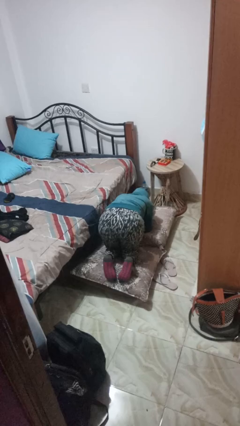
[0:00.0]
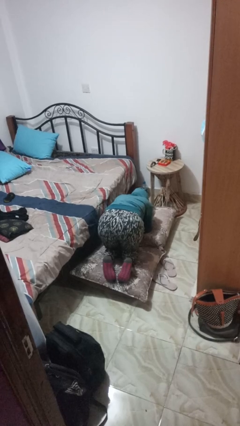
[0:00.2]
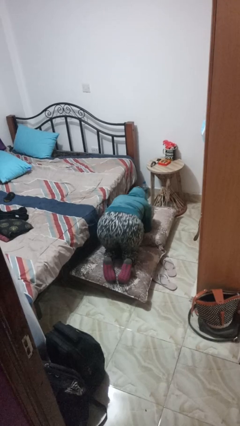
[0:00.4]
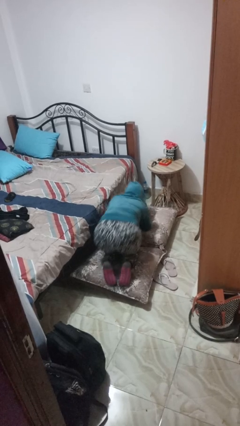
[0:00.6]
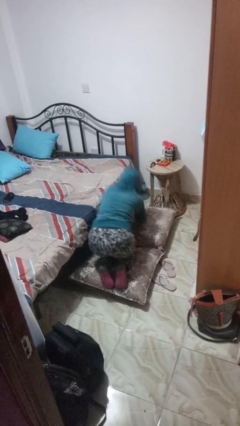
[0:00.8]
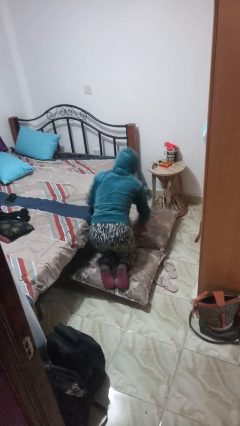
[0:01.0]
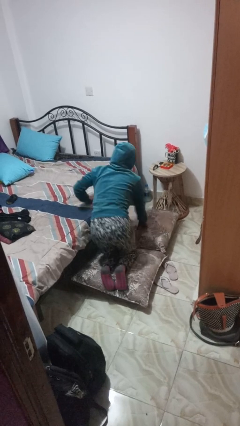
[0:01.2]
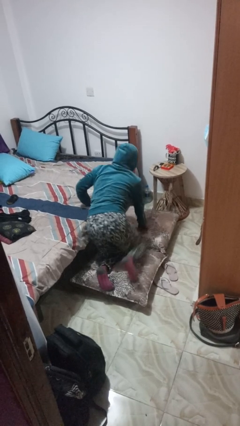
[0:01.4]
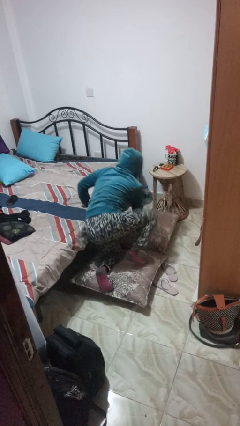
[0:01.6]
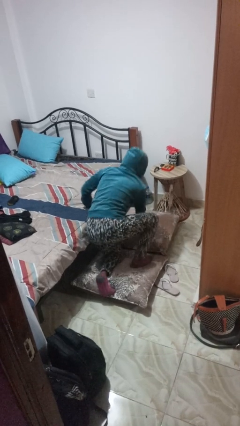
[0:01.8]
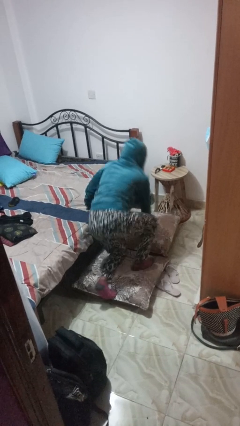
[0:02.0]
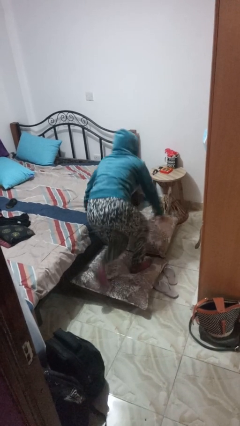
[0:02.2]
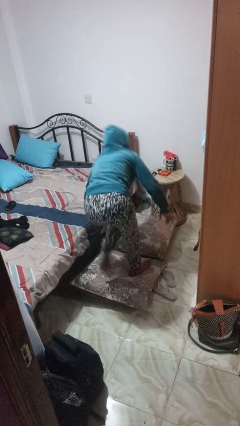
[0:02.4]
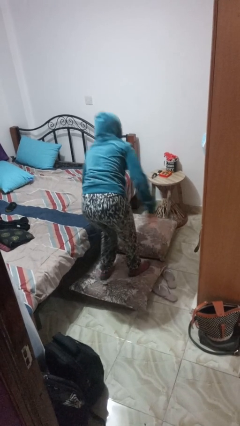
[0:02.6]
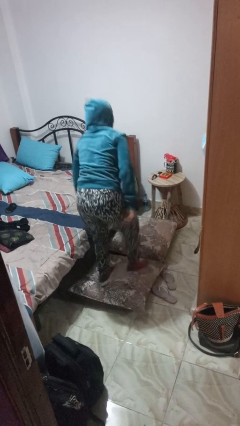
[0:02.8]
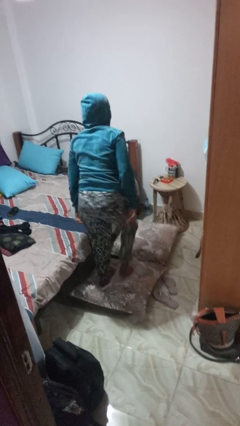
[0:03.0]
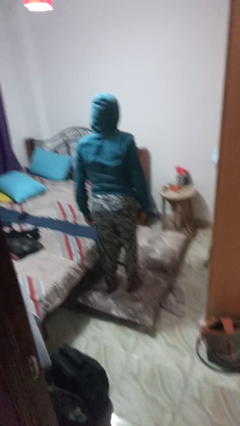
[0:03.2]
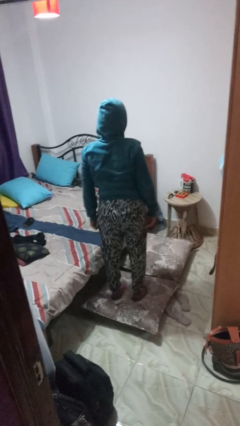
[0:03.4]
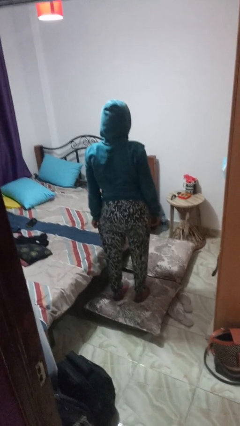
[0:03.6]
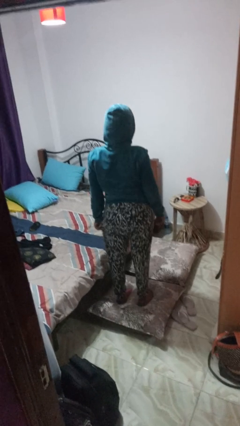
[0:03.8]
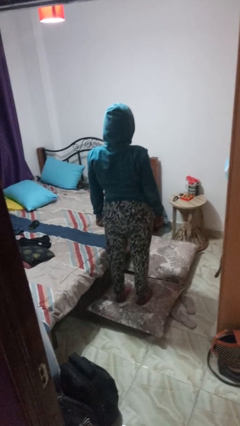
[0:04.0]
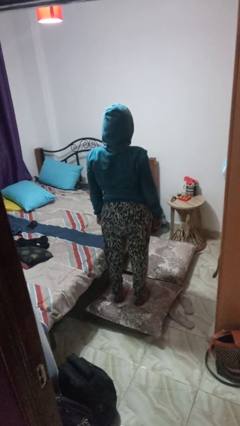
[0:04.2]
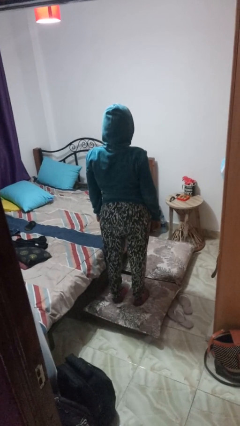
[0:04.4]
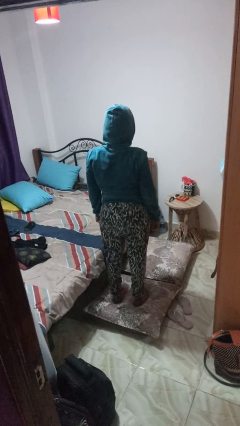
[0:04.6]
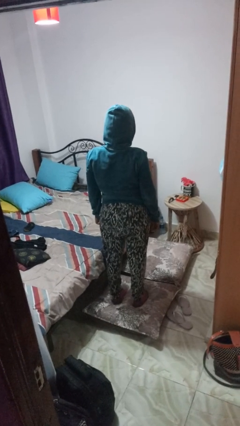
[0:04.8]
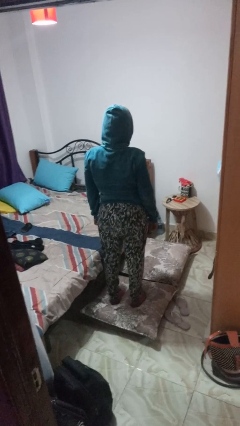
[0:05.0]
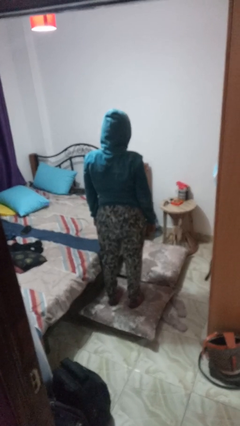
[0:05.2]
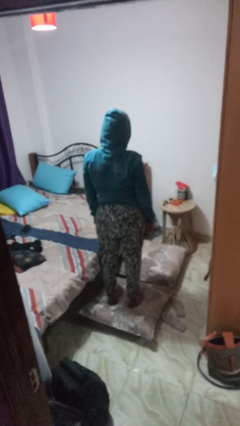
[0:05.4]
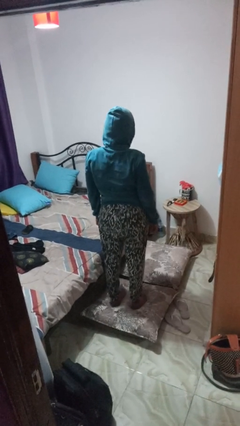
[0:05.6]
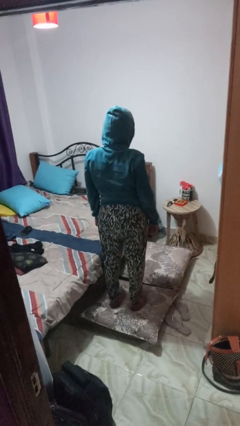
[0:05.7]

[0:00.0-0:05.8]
person stands up from floor

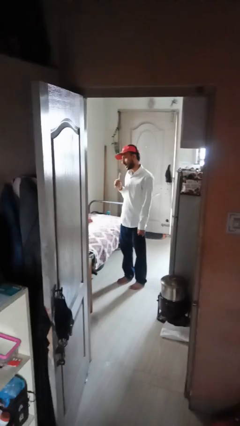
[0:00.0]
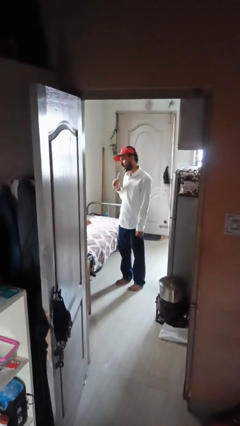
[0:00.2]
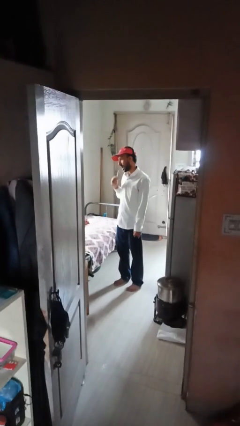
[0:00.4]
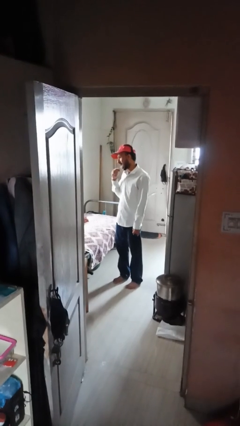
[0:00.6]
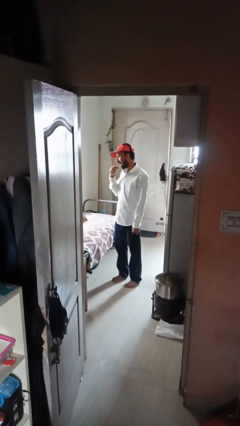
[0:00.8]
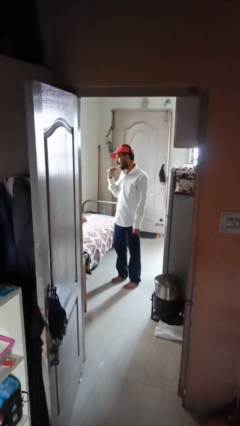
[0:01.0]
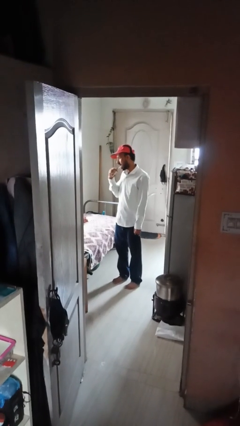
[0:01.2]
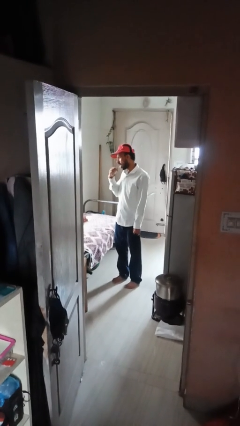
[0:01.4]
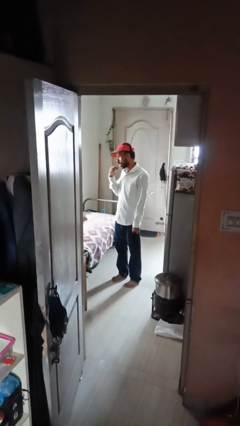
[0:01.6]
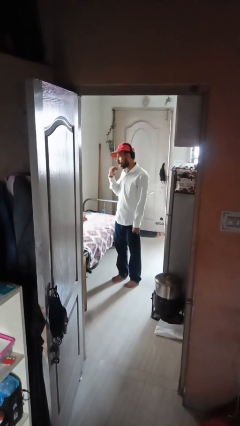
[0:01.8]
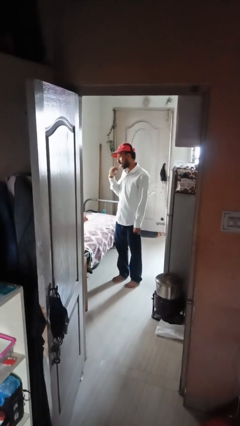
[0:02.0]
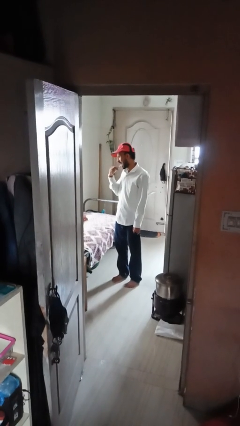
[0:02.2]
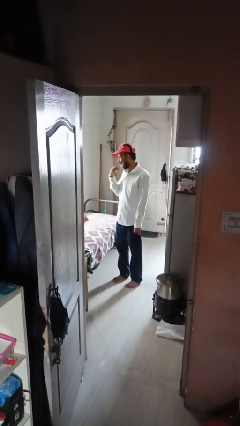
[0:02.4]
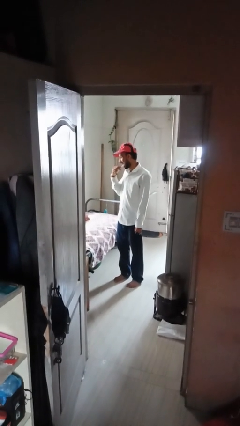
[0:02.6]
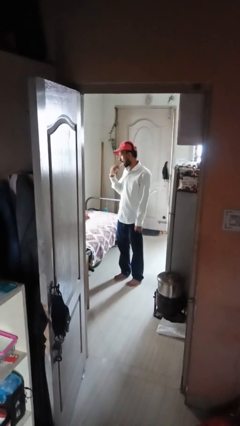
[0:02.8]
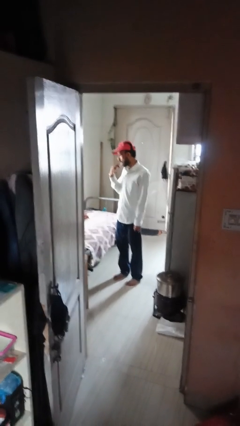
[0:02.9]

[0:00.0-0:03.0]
person brushes teeth

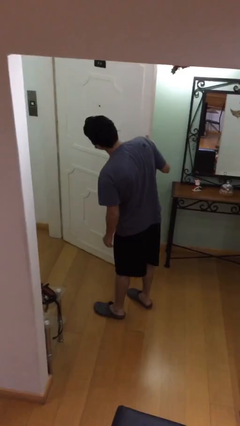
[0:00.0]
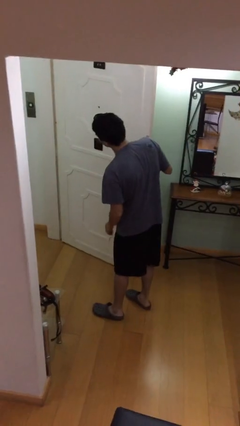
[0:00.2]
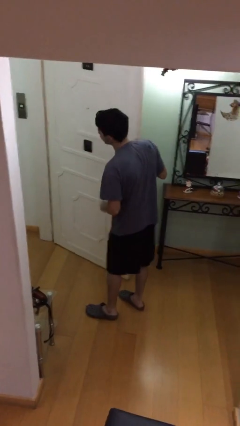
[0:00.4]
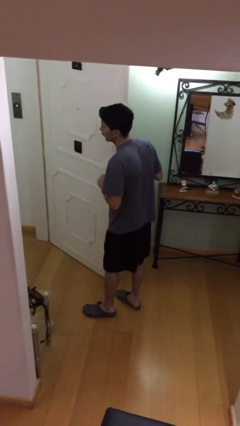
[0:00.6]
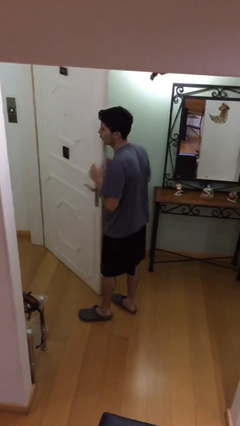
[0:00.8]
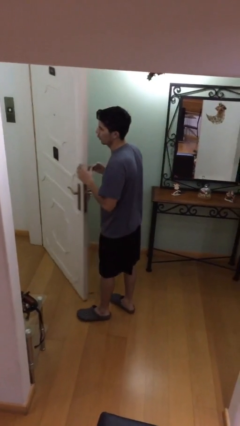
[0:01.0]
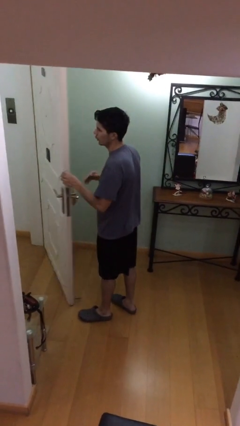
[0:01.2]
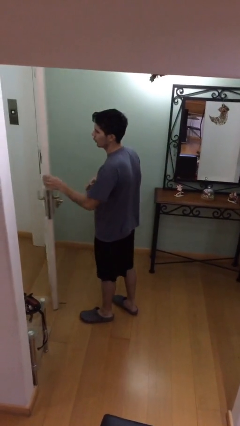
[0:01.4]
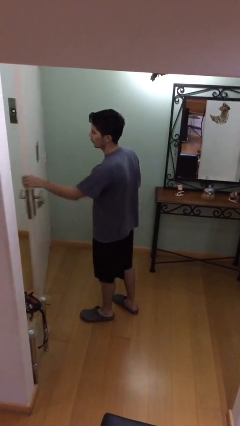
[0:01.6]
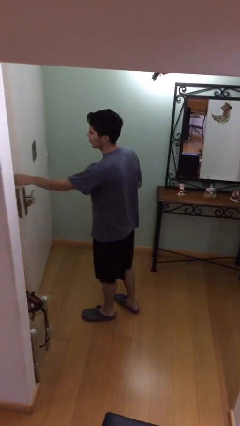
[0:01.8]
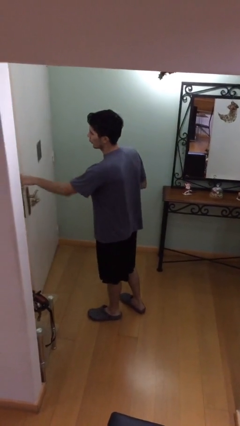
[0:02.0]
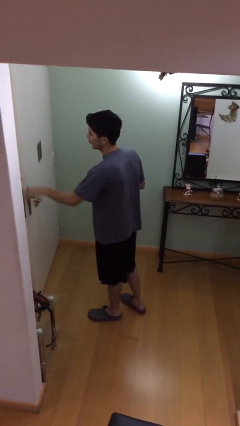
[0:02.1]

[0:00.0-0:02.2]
person closes facility door

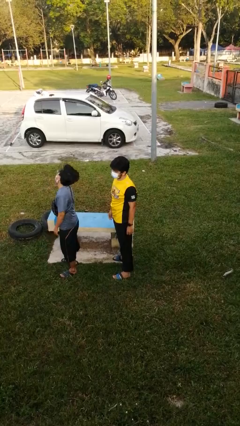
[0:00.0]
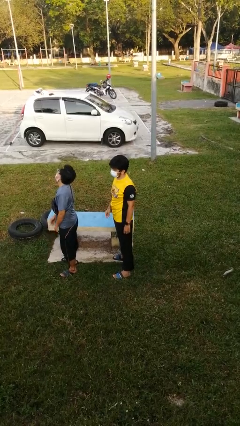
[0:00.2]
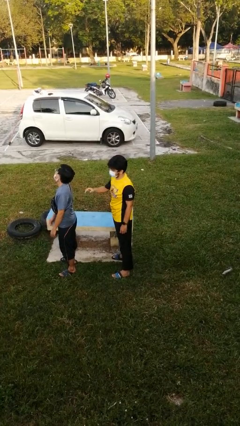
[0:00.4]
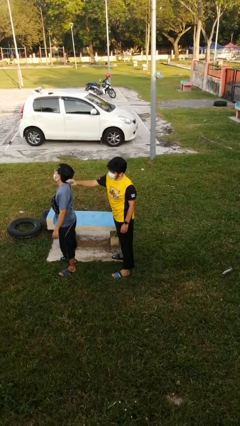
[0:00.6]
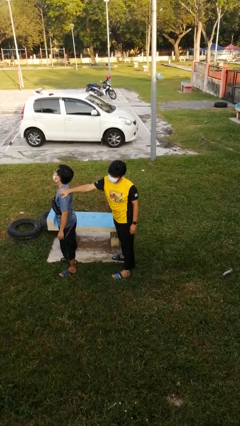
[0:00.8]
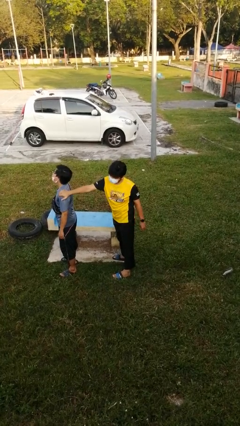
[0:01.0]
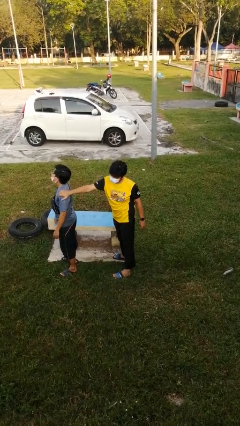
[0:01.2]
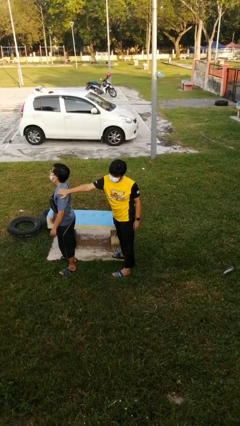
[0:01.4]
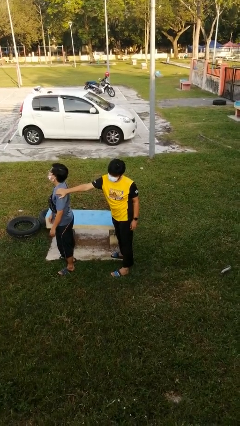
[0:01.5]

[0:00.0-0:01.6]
person grabs person by shoulder

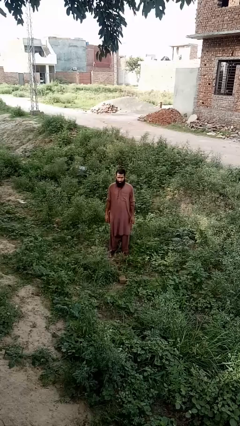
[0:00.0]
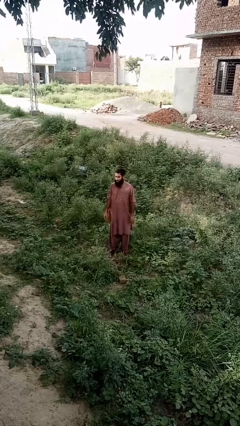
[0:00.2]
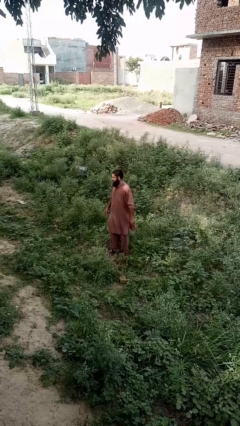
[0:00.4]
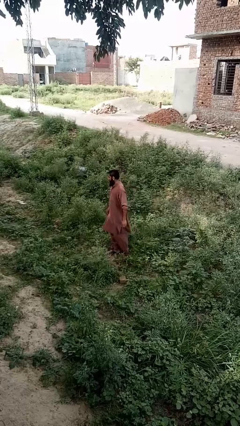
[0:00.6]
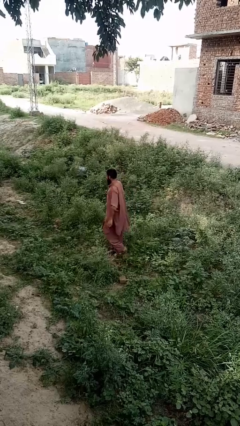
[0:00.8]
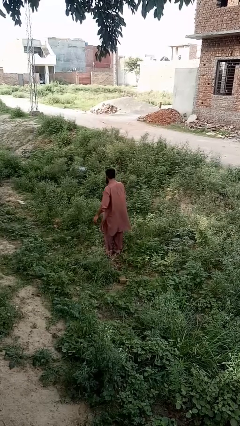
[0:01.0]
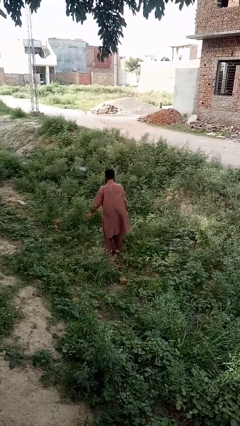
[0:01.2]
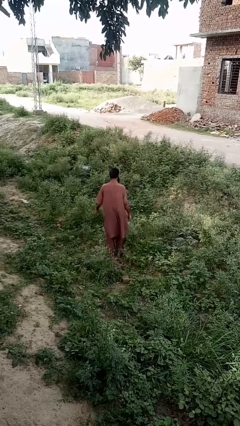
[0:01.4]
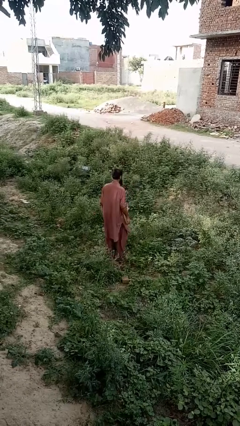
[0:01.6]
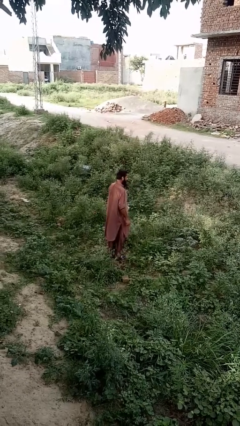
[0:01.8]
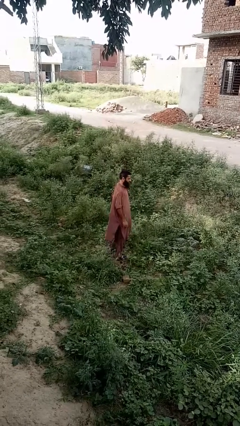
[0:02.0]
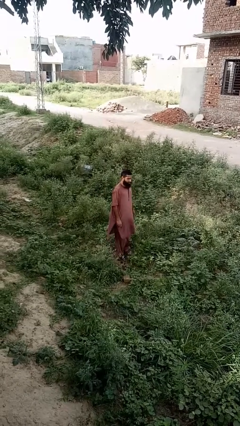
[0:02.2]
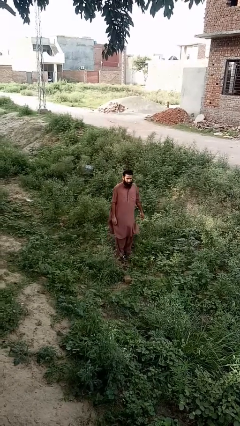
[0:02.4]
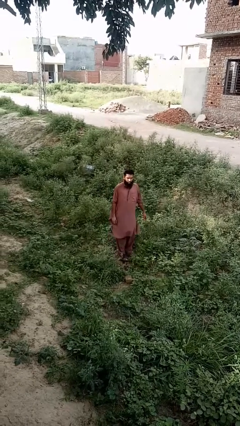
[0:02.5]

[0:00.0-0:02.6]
person twirls

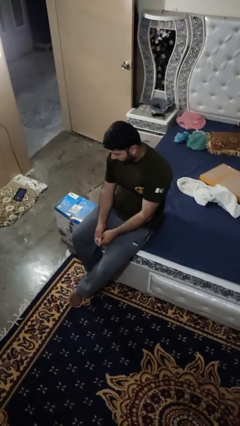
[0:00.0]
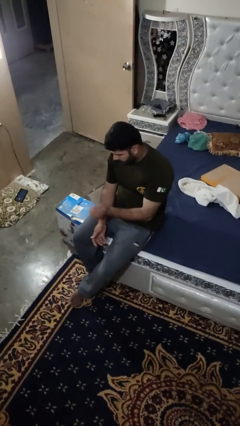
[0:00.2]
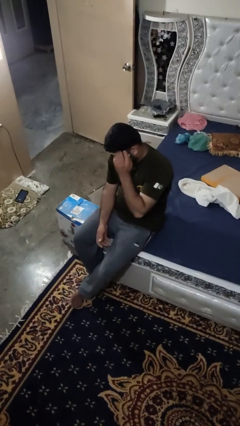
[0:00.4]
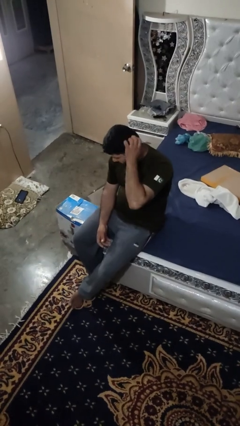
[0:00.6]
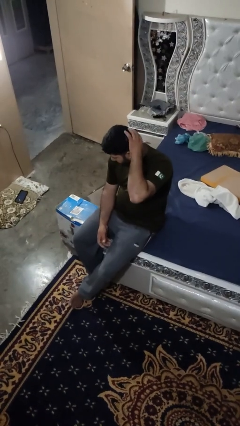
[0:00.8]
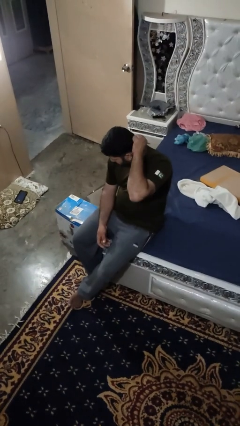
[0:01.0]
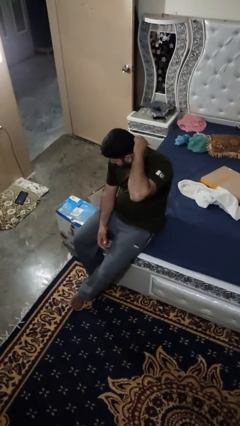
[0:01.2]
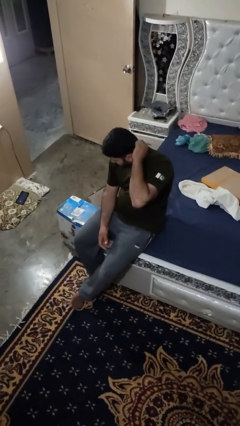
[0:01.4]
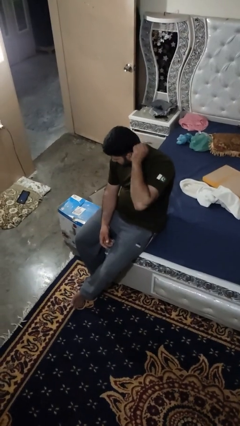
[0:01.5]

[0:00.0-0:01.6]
person strokes hair

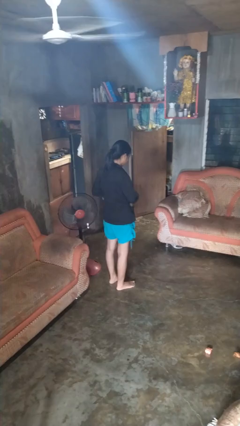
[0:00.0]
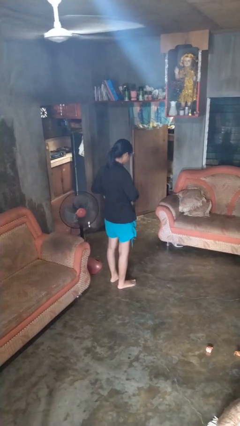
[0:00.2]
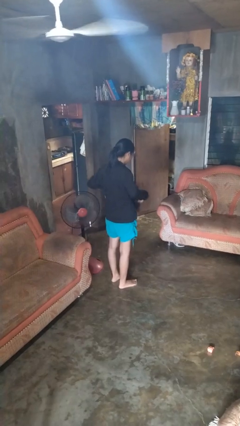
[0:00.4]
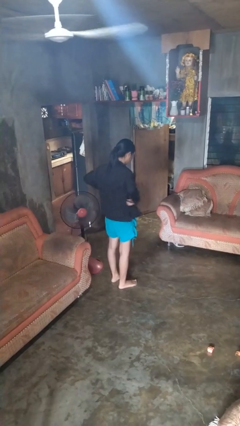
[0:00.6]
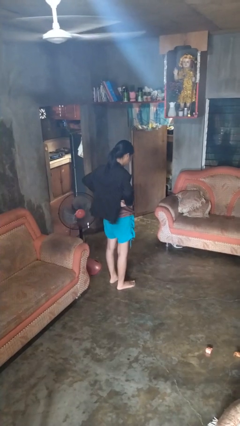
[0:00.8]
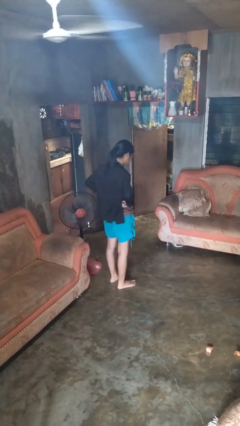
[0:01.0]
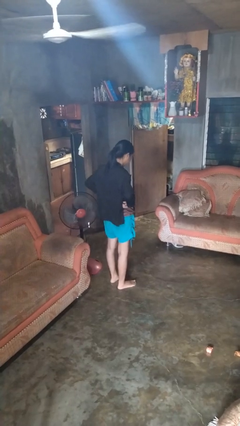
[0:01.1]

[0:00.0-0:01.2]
person unbuttons shirt
